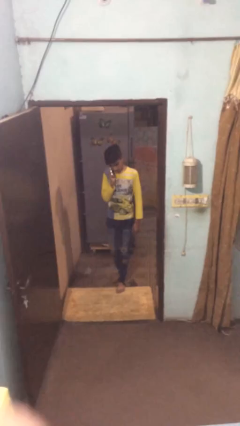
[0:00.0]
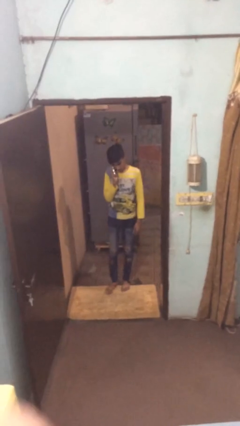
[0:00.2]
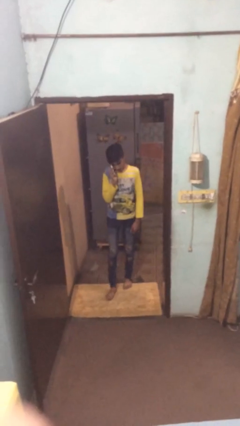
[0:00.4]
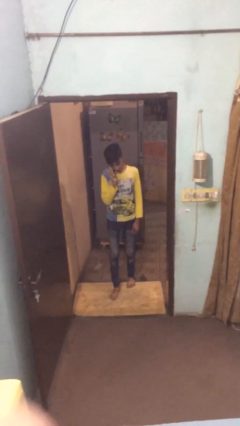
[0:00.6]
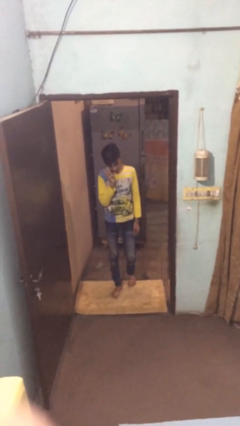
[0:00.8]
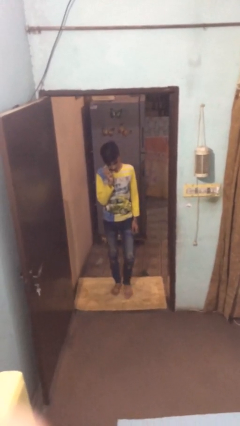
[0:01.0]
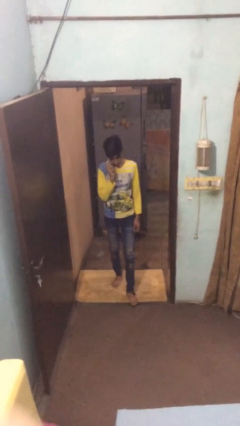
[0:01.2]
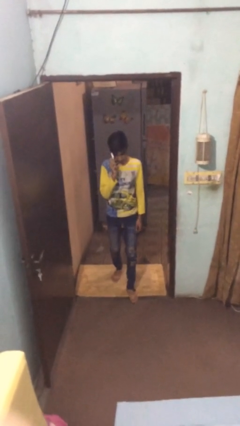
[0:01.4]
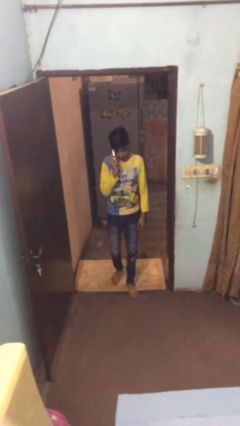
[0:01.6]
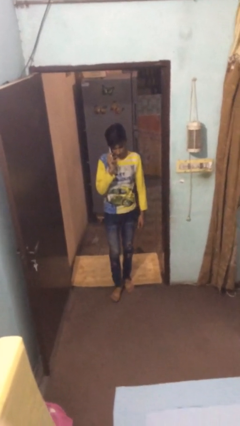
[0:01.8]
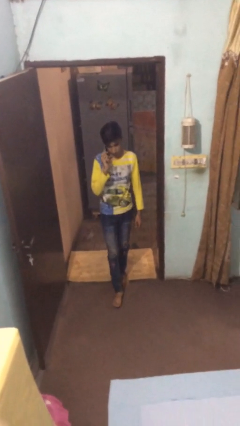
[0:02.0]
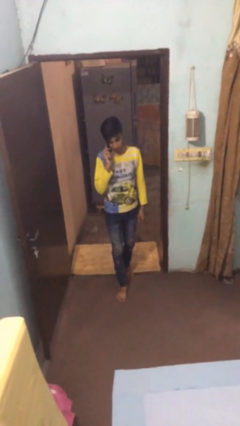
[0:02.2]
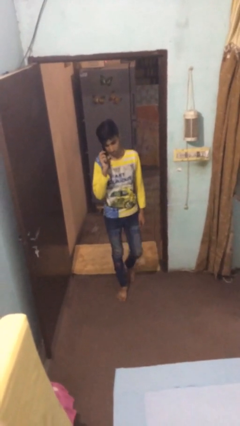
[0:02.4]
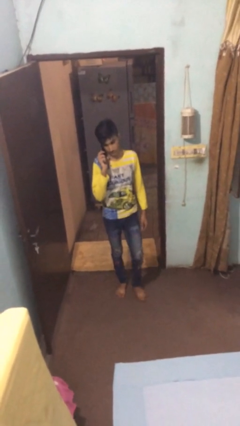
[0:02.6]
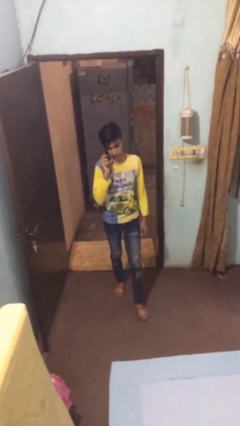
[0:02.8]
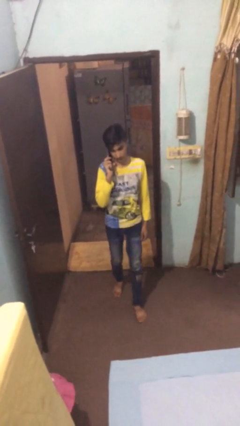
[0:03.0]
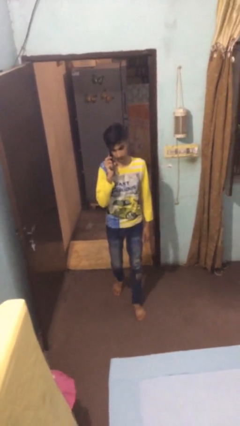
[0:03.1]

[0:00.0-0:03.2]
person enters scene through structure

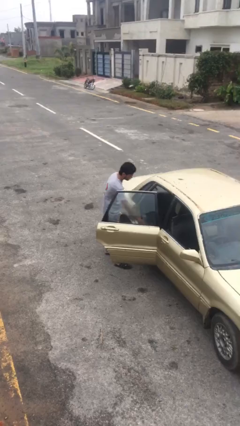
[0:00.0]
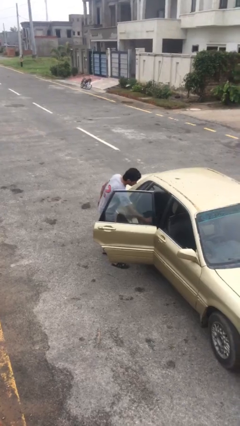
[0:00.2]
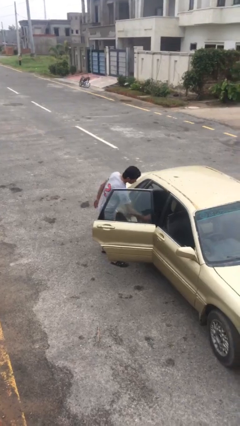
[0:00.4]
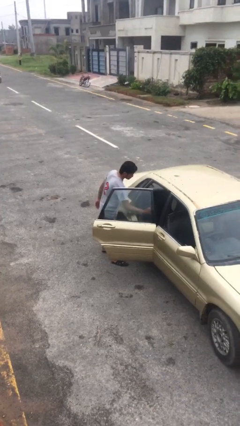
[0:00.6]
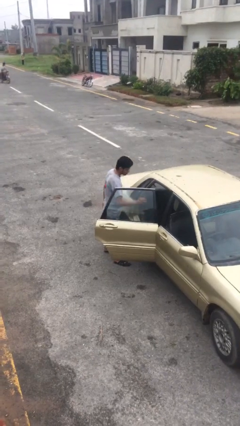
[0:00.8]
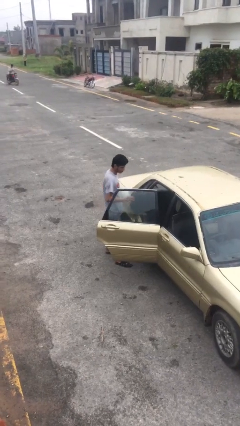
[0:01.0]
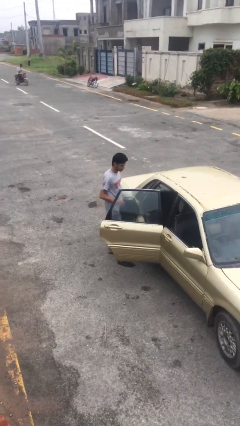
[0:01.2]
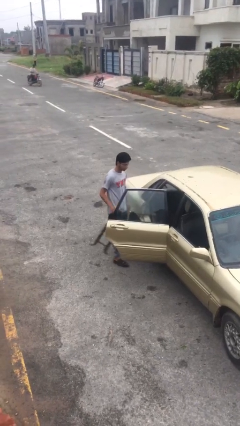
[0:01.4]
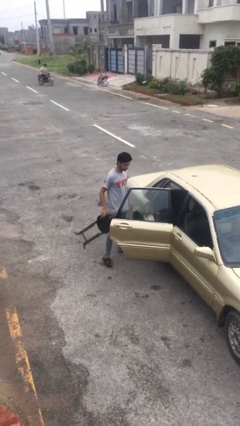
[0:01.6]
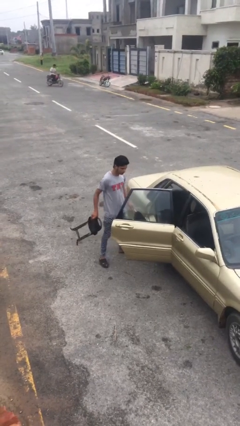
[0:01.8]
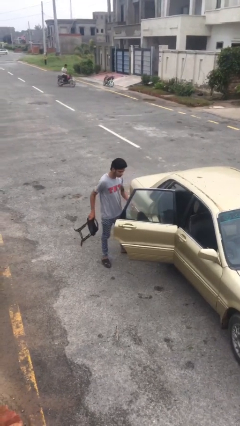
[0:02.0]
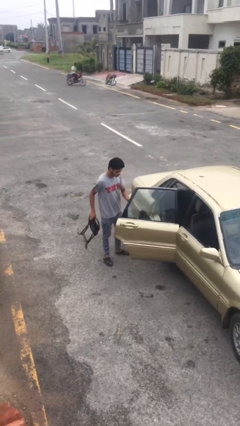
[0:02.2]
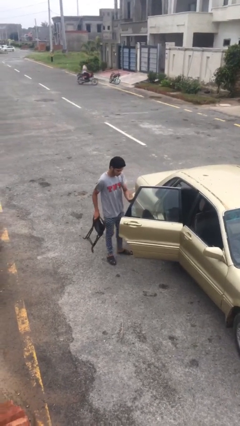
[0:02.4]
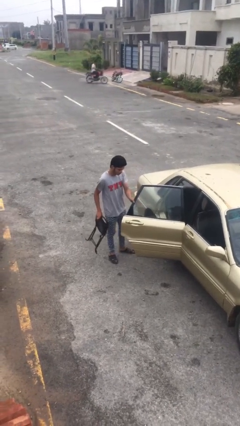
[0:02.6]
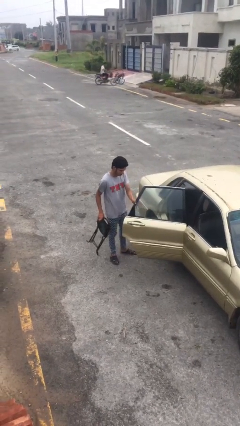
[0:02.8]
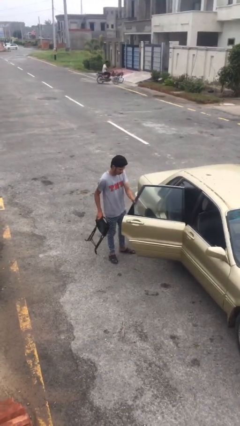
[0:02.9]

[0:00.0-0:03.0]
person unloads car

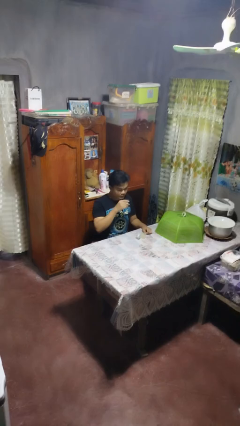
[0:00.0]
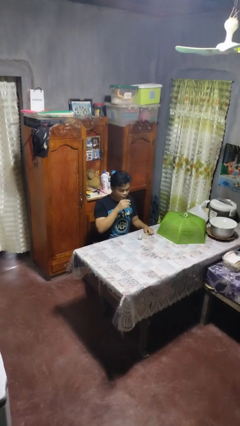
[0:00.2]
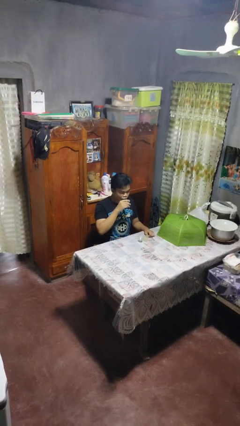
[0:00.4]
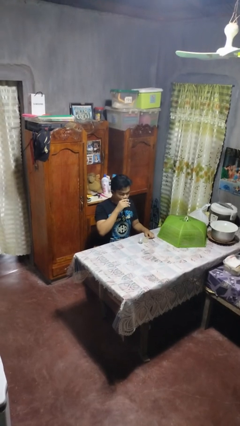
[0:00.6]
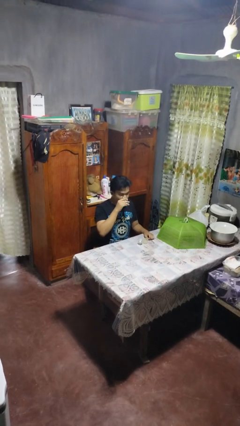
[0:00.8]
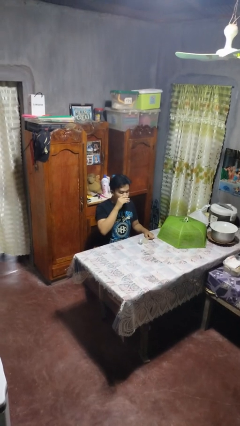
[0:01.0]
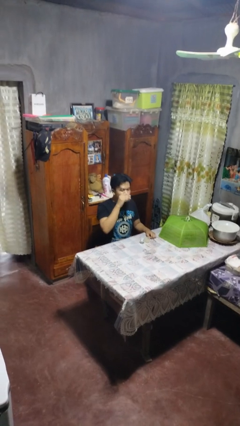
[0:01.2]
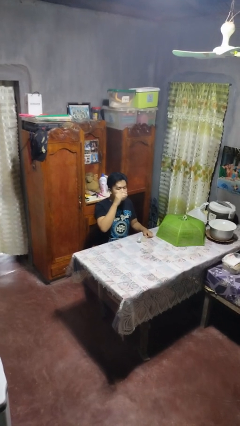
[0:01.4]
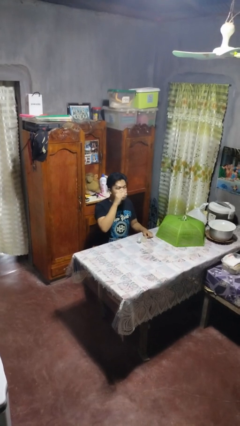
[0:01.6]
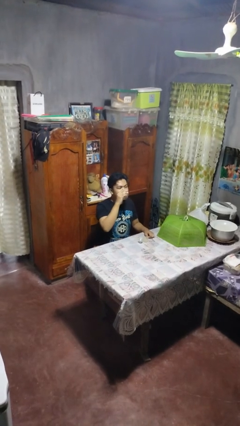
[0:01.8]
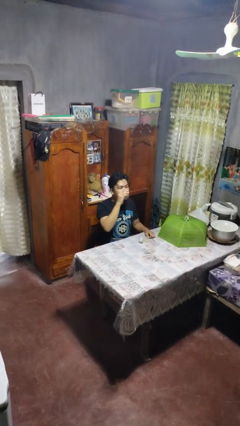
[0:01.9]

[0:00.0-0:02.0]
person drinks from shotglass

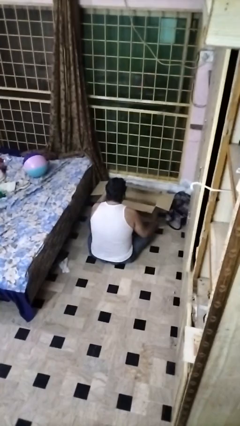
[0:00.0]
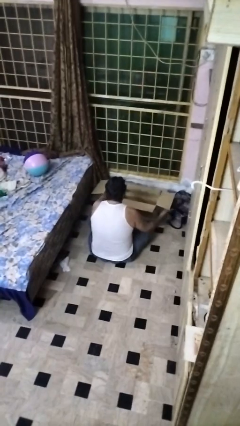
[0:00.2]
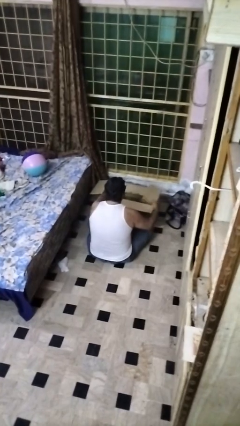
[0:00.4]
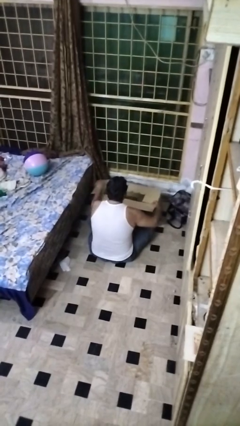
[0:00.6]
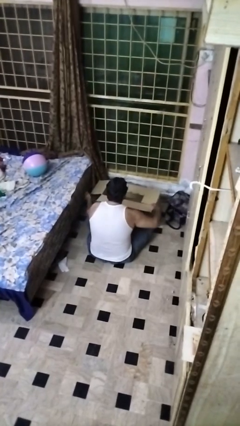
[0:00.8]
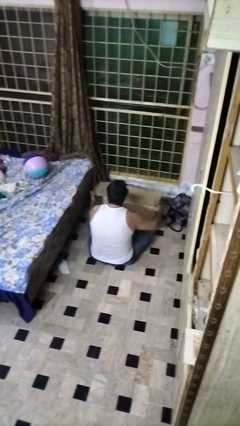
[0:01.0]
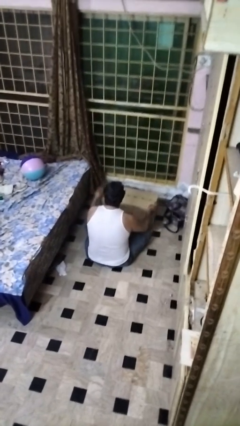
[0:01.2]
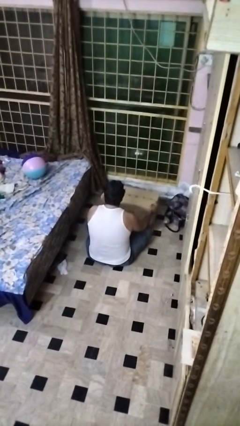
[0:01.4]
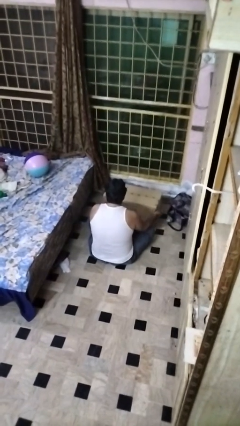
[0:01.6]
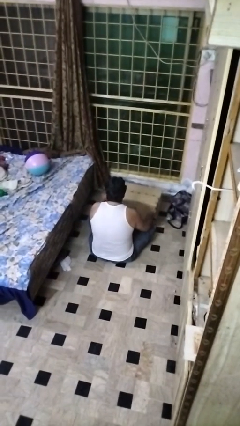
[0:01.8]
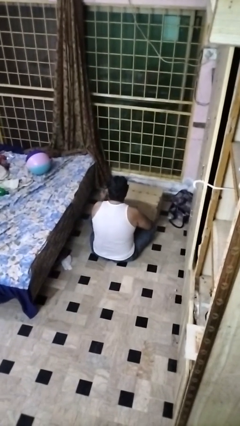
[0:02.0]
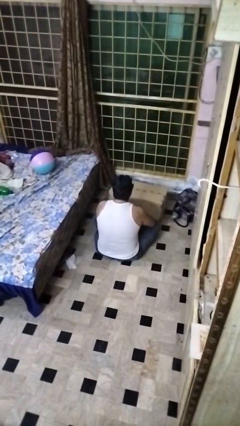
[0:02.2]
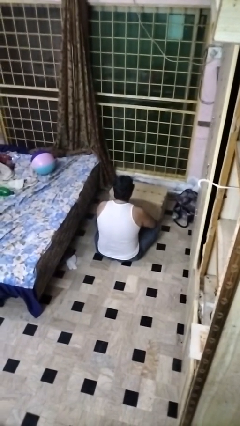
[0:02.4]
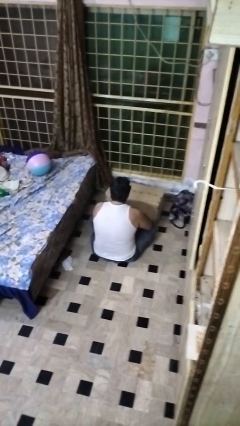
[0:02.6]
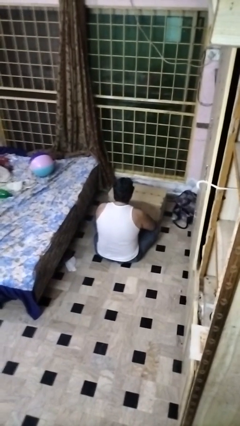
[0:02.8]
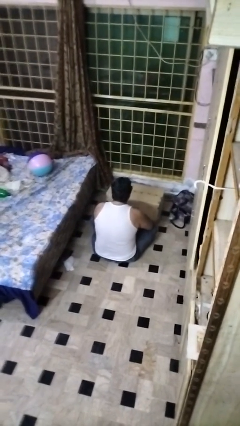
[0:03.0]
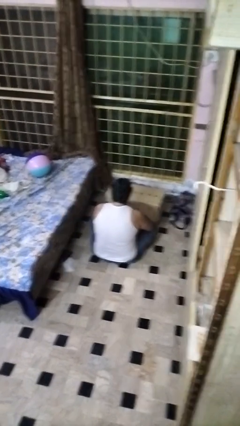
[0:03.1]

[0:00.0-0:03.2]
person closes box

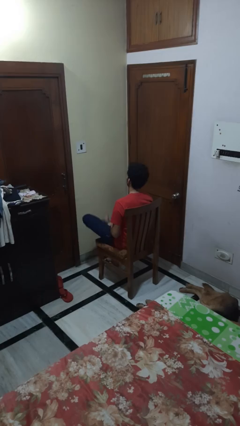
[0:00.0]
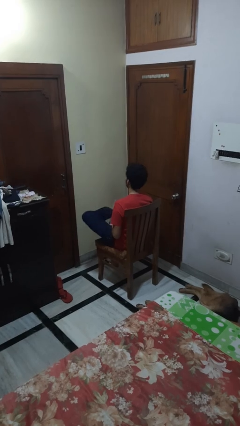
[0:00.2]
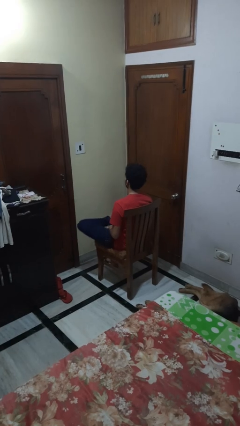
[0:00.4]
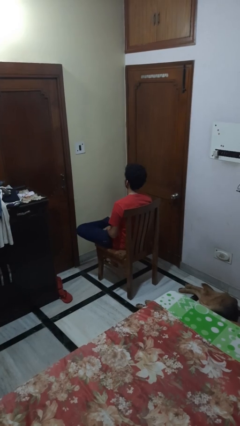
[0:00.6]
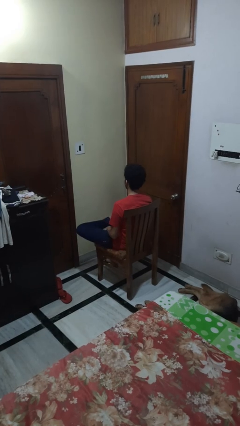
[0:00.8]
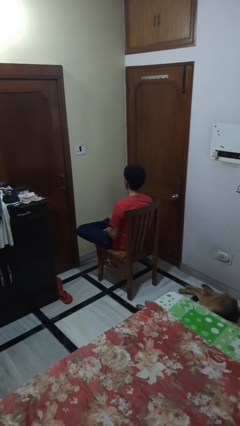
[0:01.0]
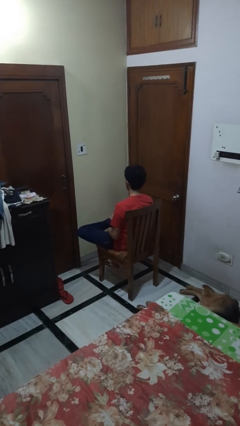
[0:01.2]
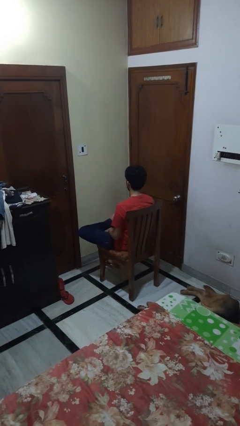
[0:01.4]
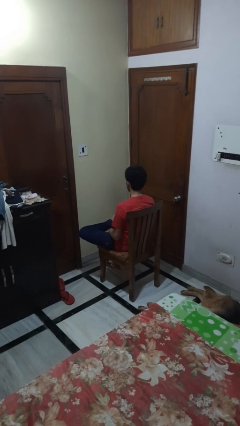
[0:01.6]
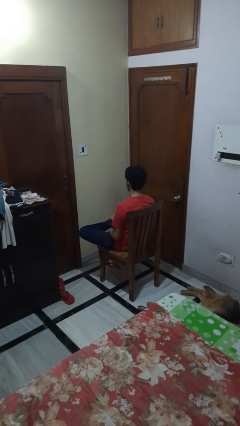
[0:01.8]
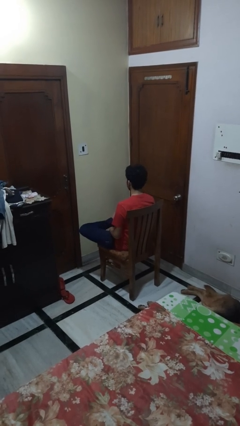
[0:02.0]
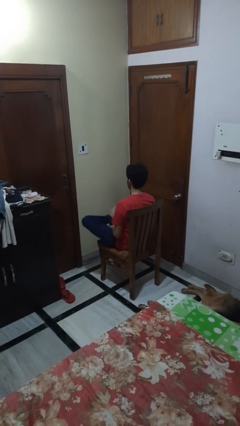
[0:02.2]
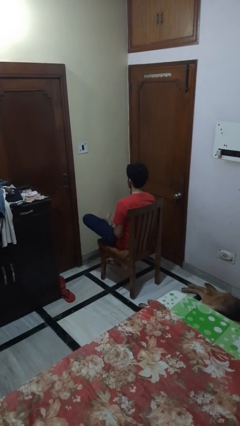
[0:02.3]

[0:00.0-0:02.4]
person crosses legs

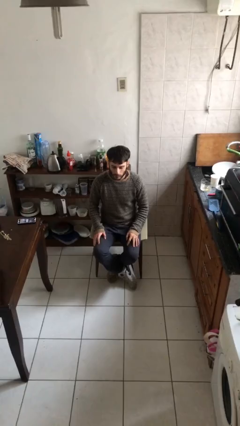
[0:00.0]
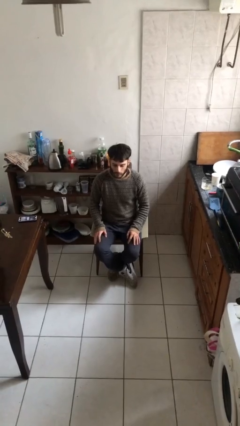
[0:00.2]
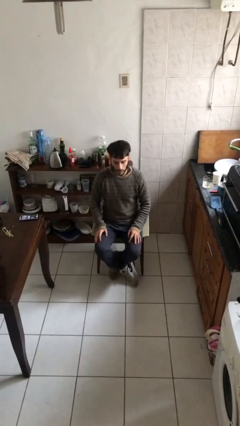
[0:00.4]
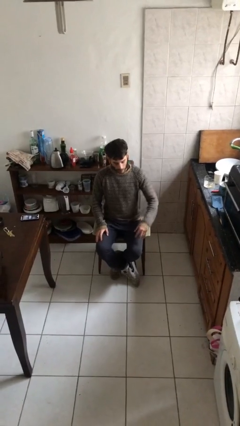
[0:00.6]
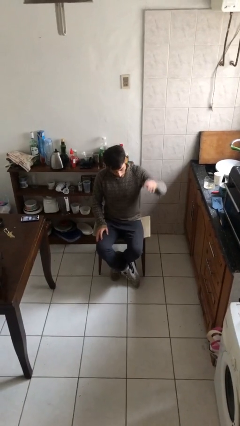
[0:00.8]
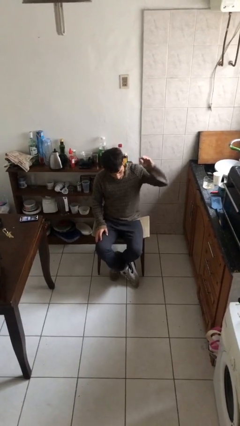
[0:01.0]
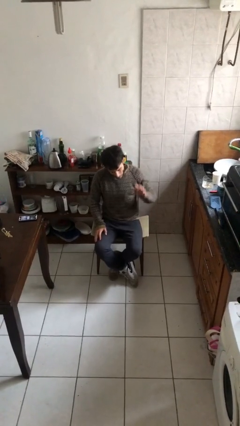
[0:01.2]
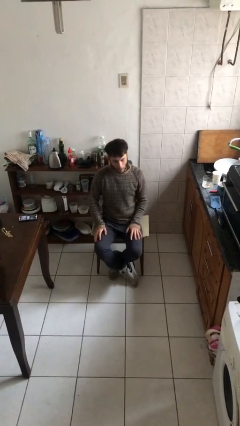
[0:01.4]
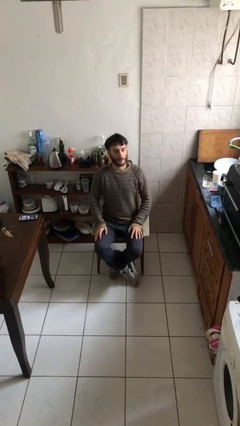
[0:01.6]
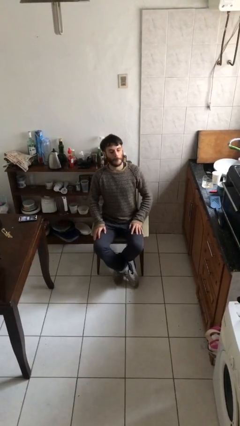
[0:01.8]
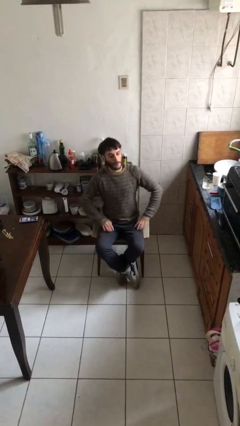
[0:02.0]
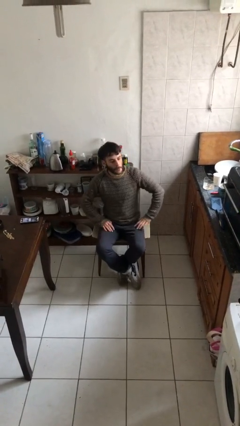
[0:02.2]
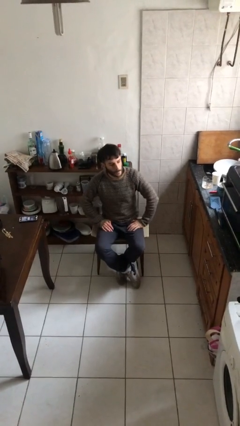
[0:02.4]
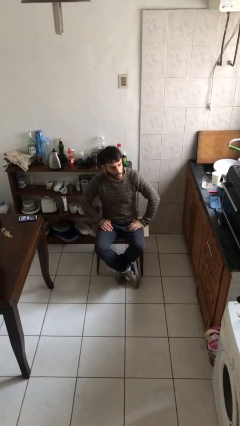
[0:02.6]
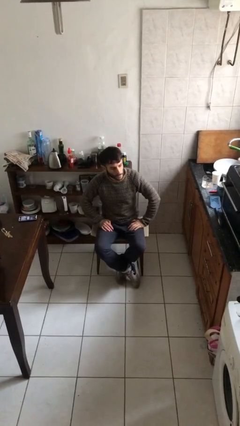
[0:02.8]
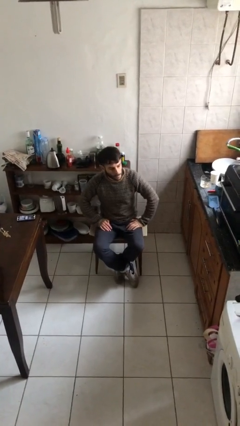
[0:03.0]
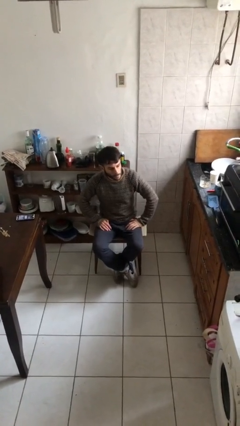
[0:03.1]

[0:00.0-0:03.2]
person slaps hands on thighs

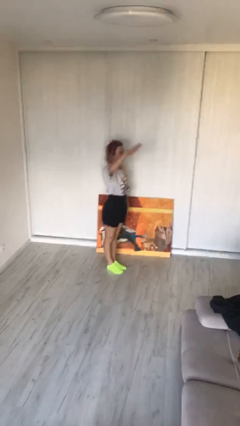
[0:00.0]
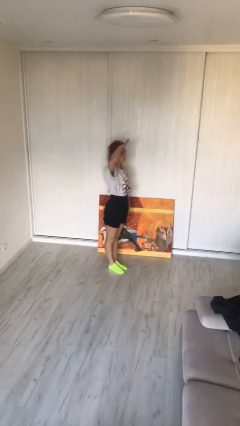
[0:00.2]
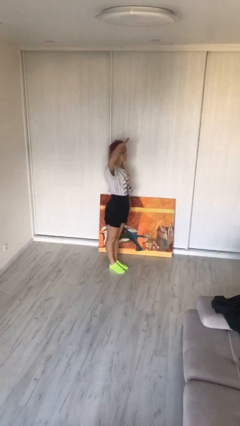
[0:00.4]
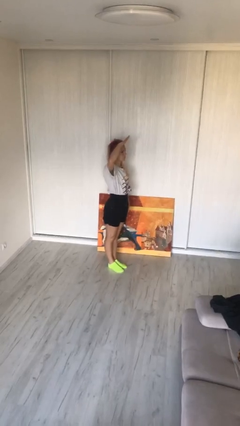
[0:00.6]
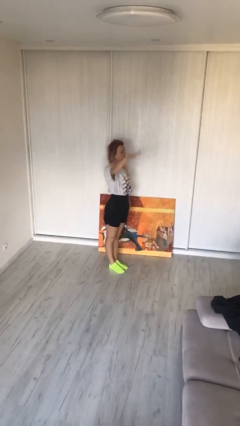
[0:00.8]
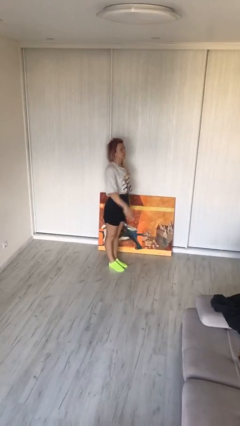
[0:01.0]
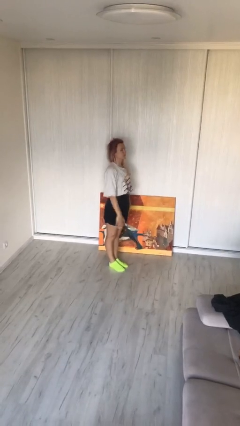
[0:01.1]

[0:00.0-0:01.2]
person salutes
